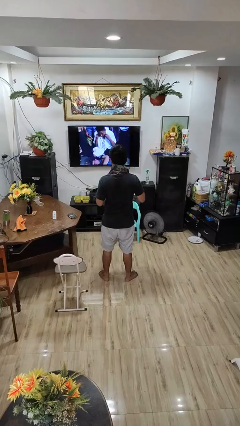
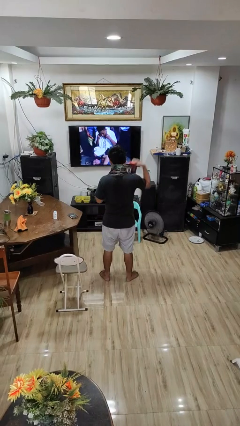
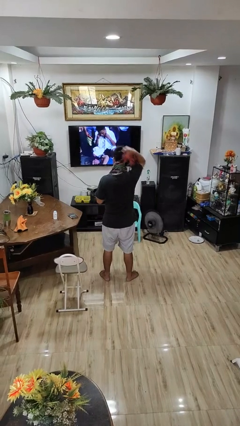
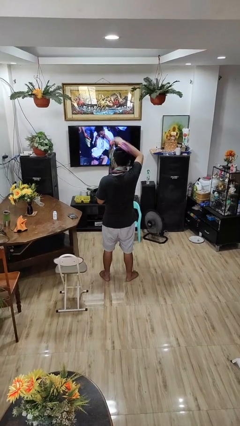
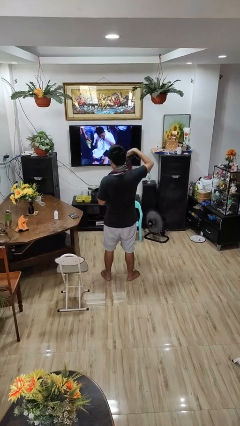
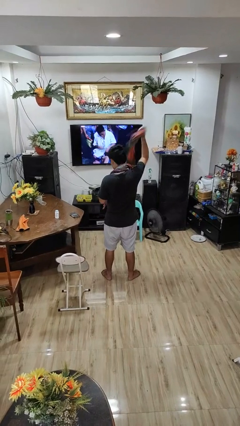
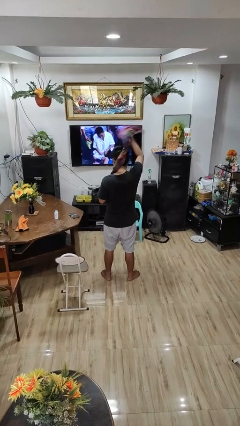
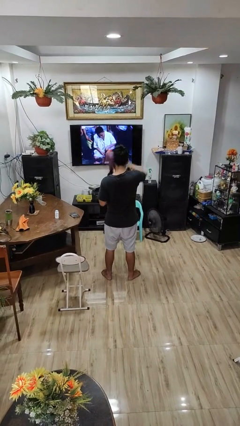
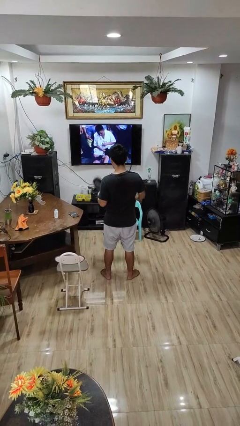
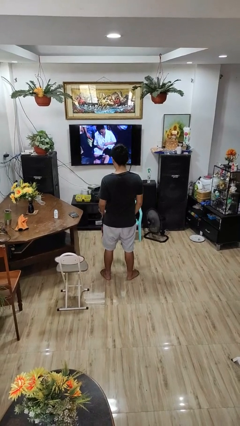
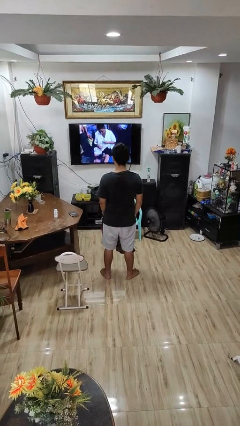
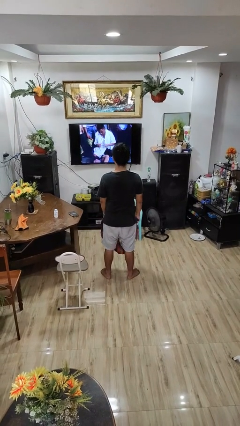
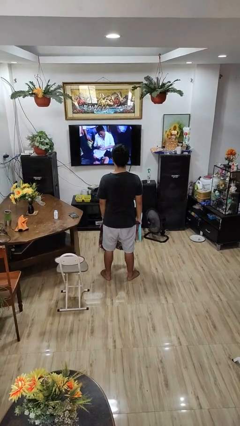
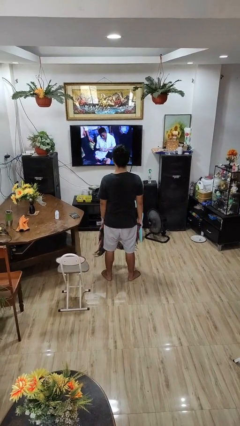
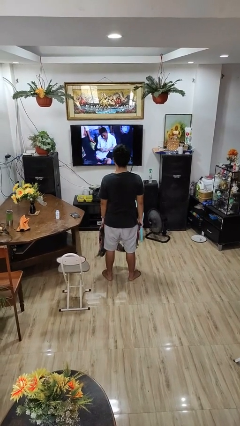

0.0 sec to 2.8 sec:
person takes off scarf

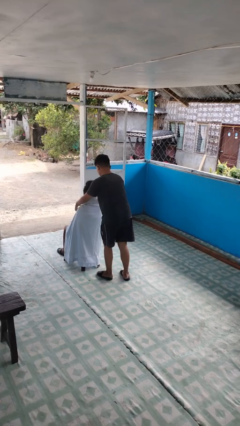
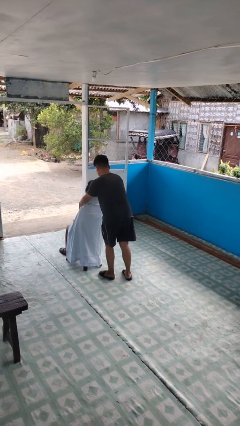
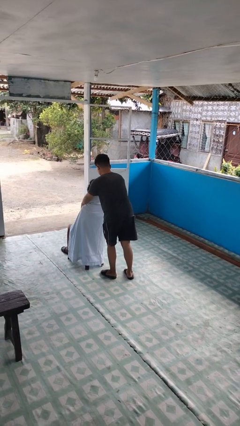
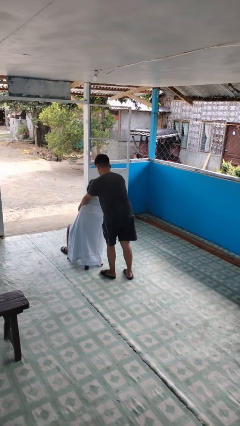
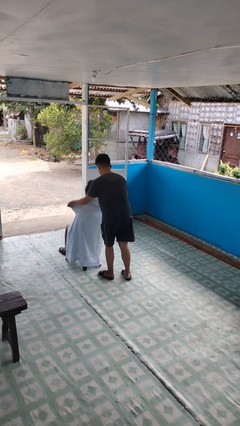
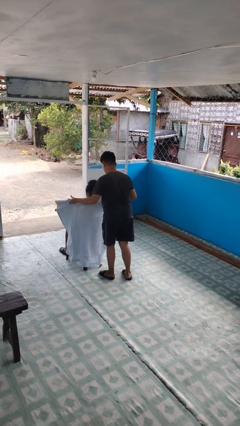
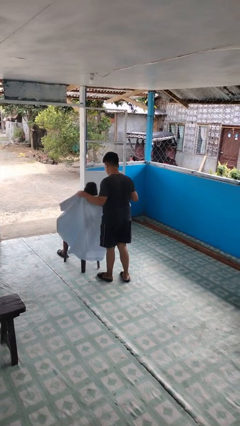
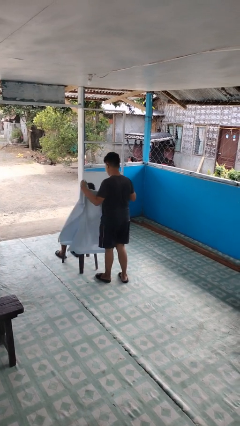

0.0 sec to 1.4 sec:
person uncovers friend with blanket

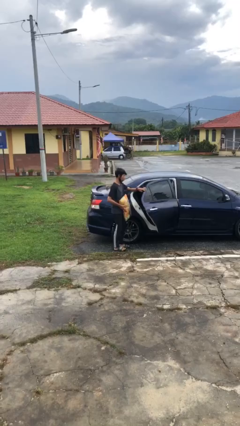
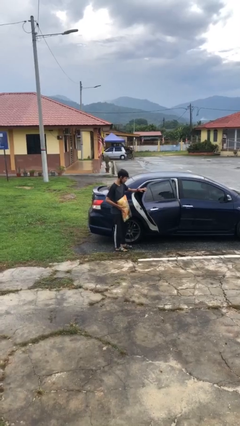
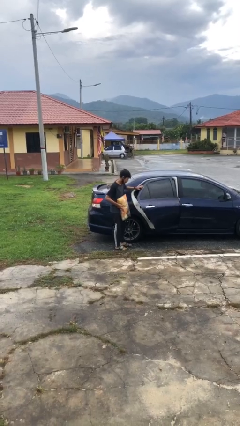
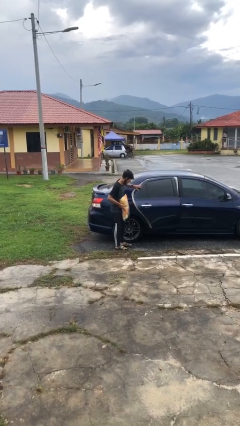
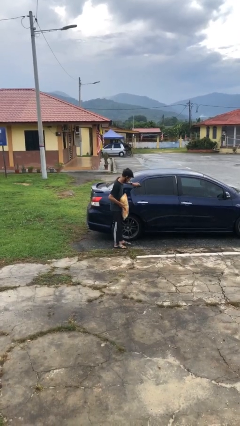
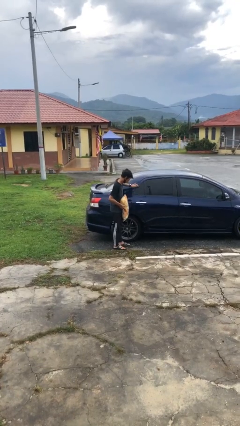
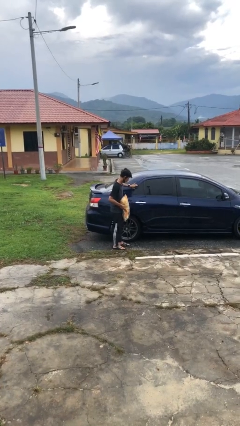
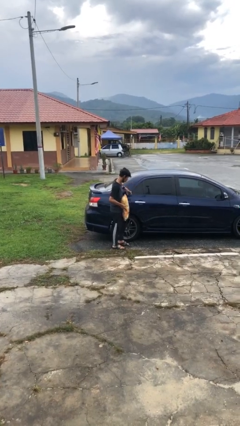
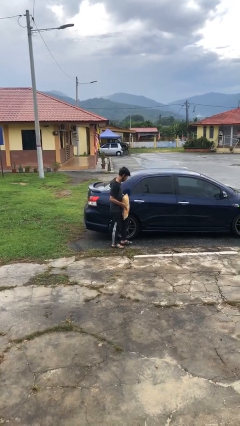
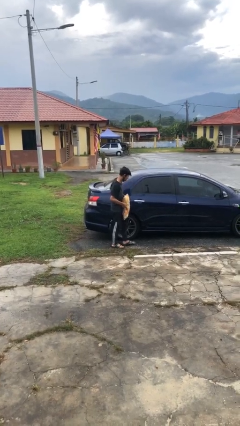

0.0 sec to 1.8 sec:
person closes car door

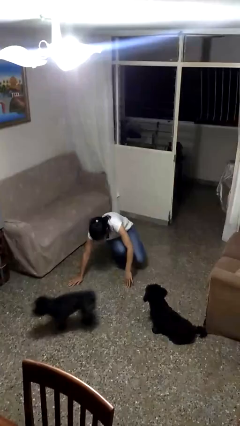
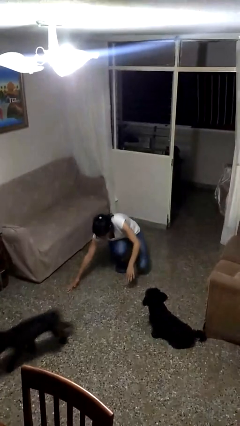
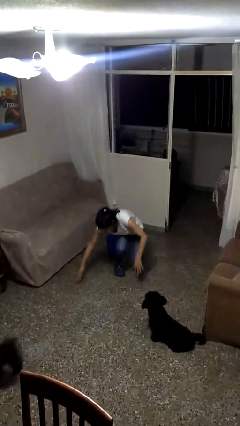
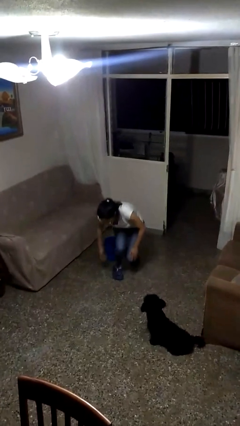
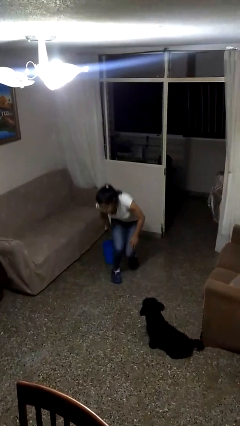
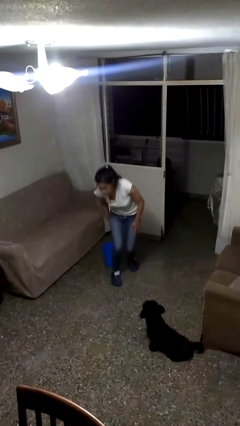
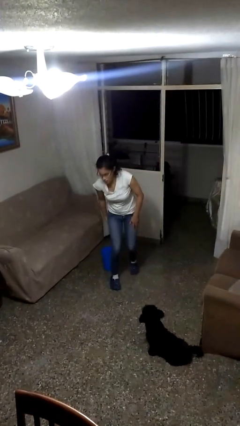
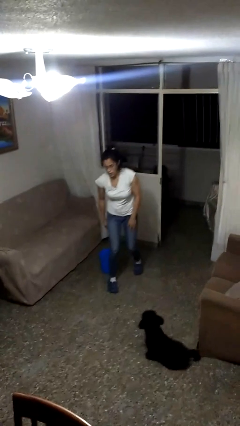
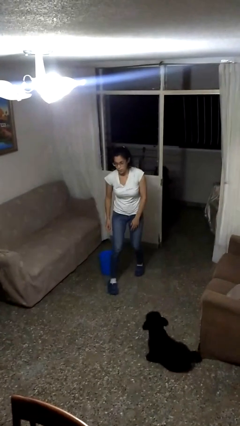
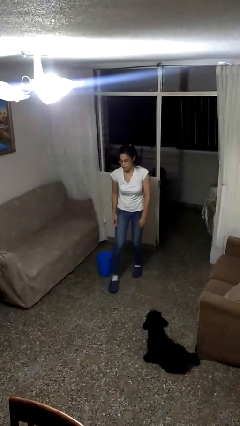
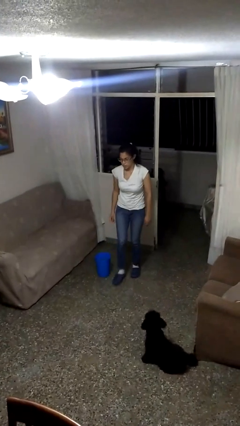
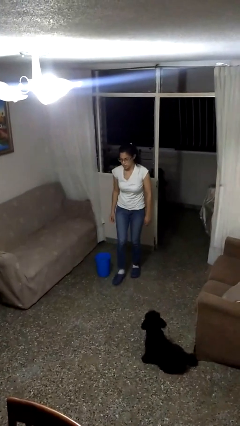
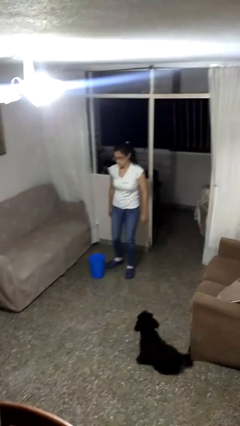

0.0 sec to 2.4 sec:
person stands up from floor

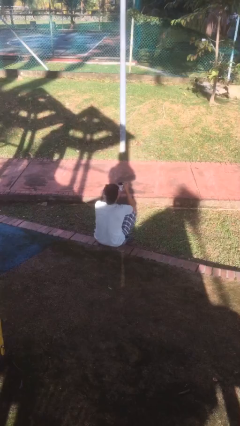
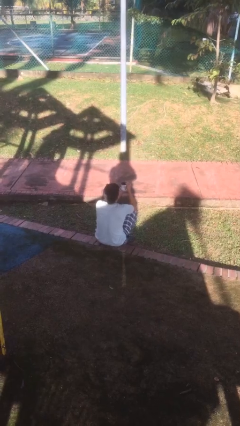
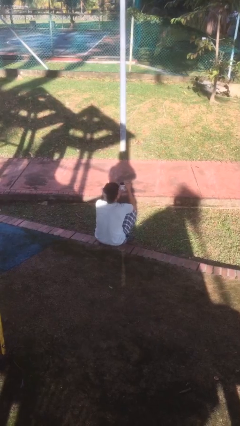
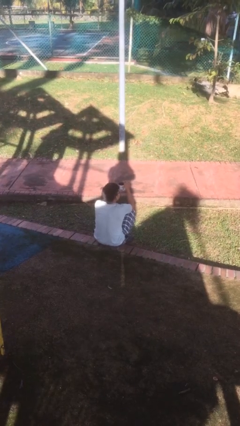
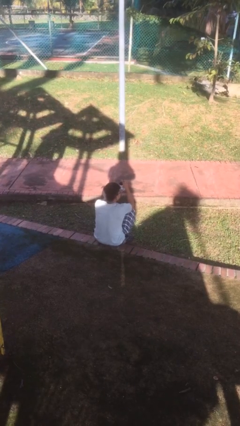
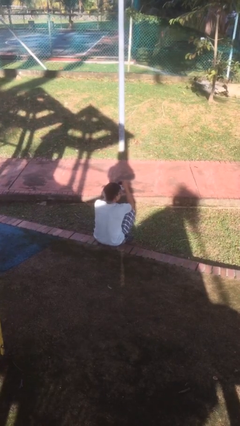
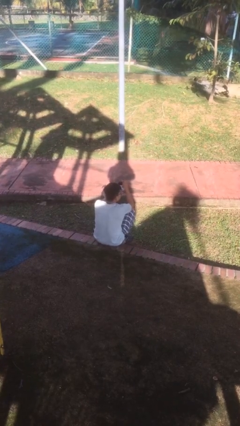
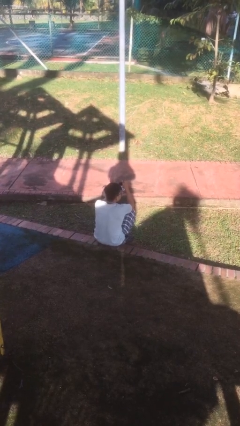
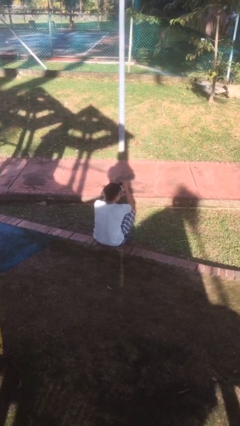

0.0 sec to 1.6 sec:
person stirs mug

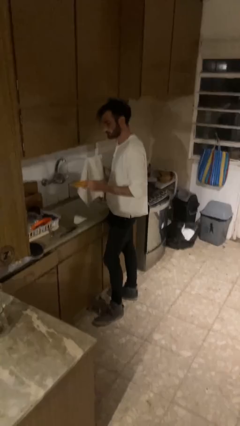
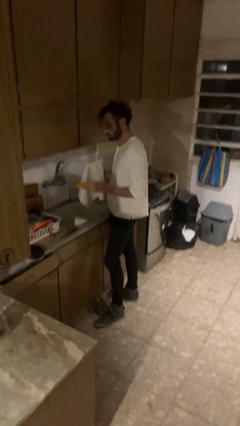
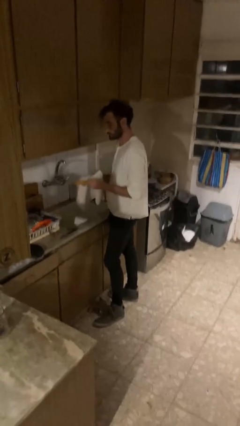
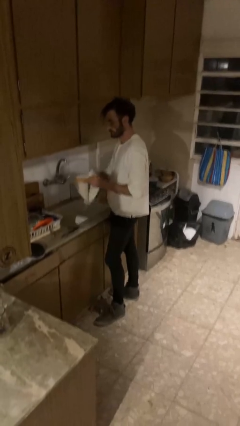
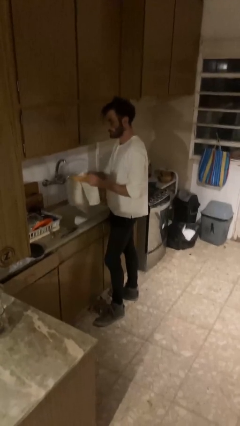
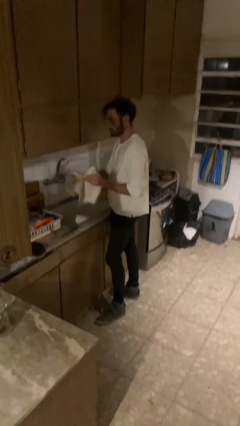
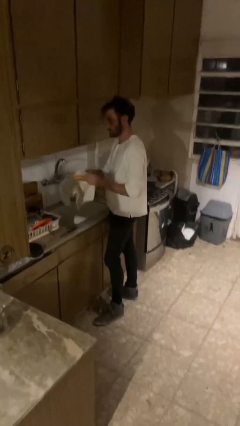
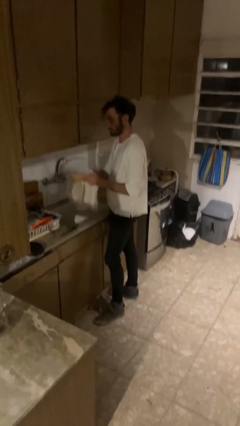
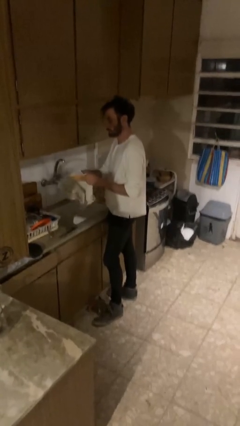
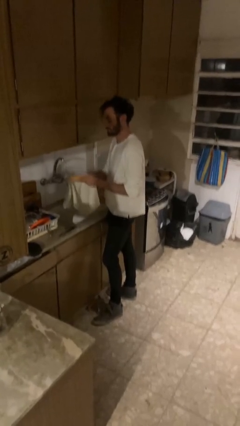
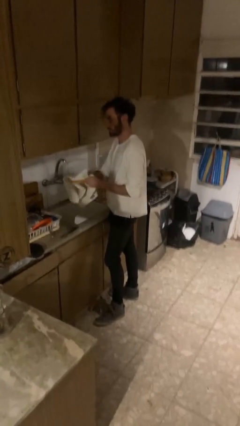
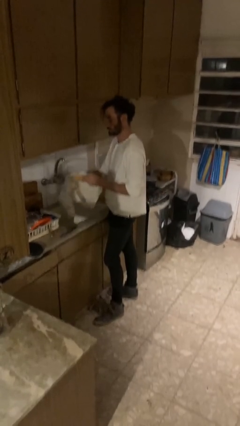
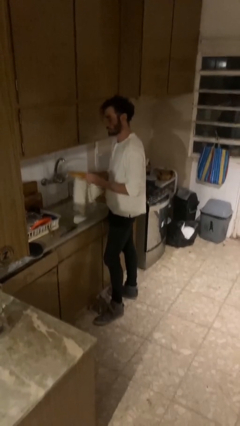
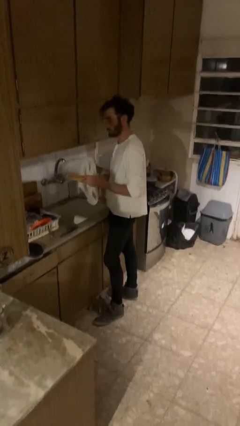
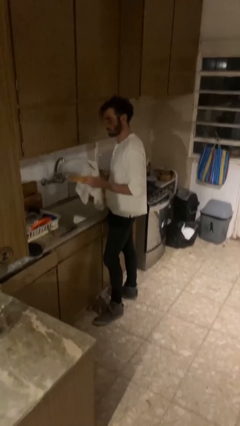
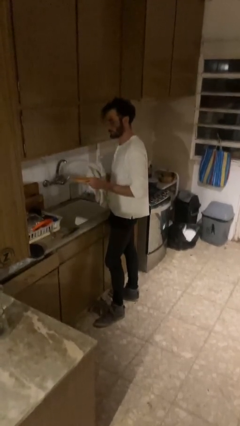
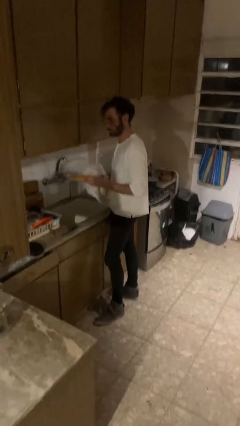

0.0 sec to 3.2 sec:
person dries dish

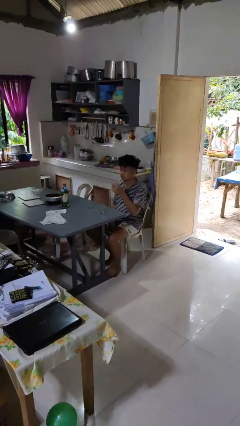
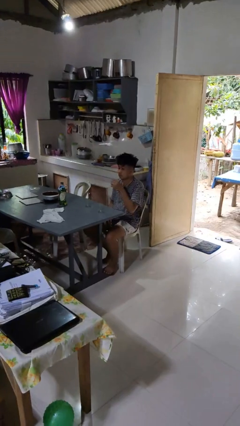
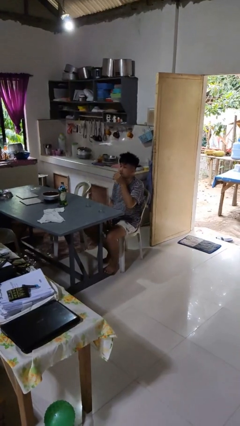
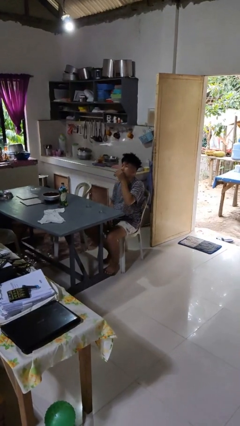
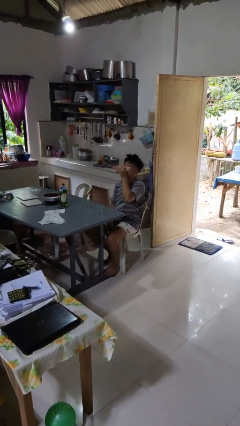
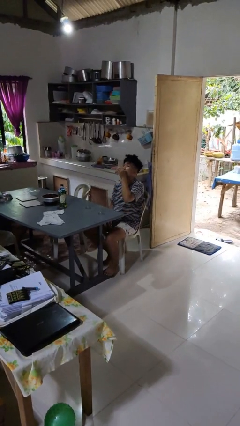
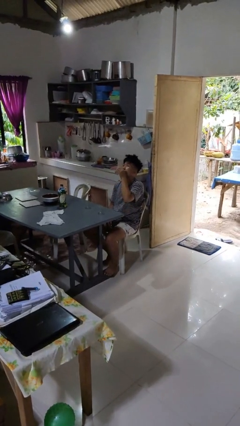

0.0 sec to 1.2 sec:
person drinks from shotglass

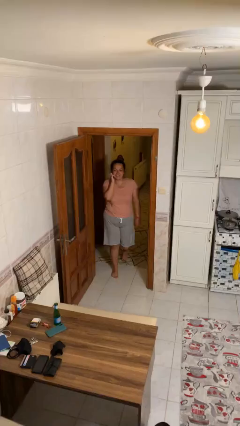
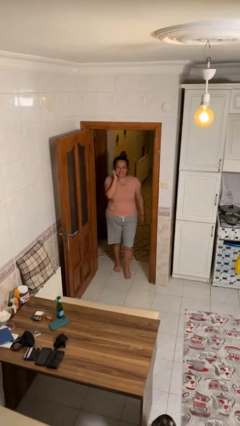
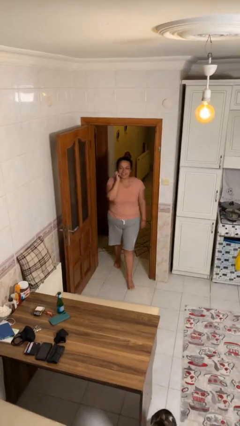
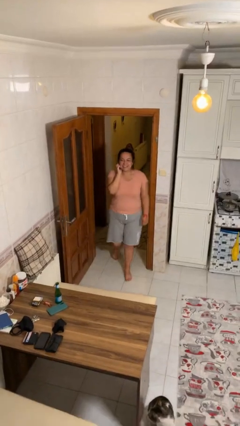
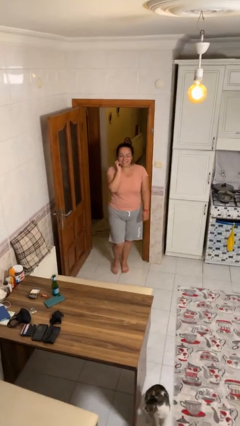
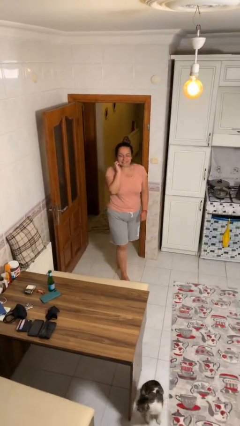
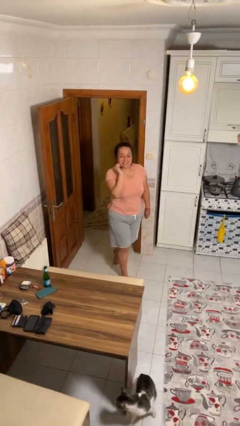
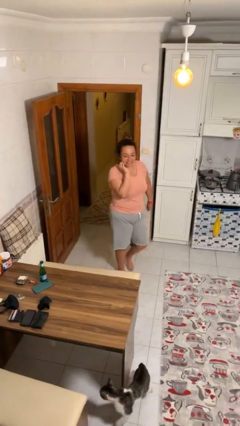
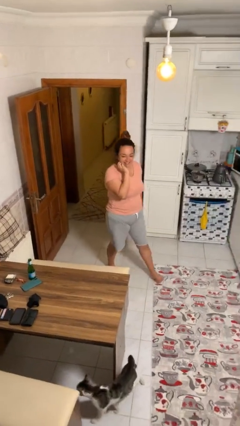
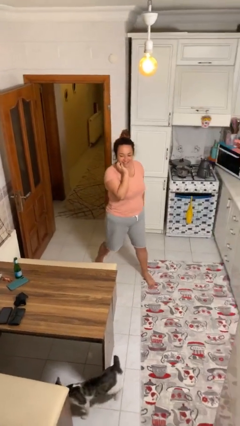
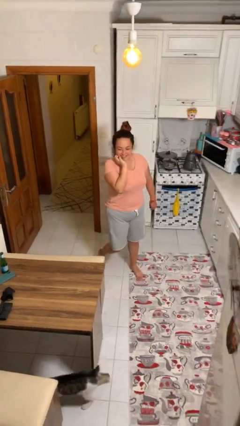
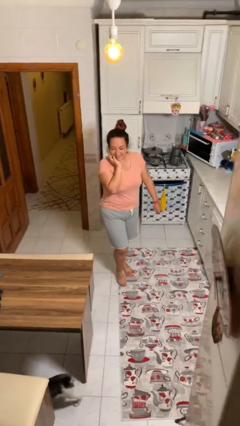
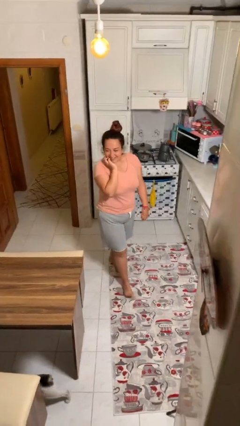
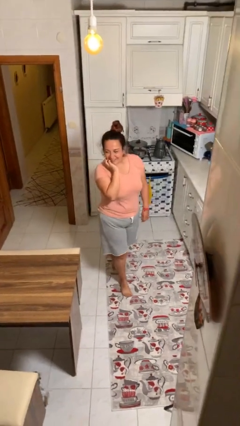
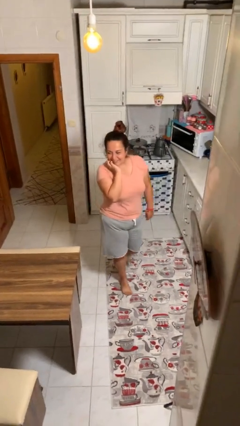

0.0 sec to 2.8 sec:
person enters scene through structure
